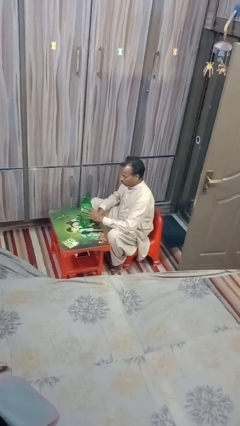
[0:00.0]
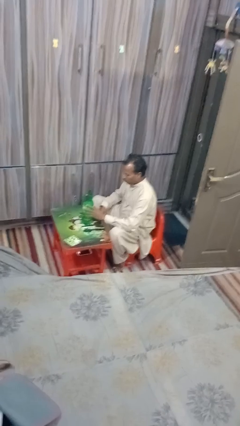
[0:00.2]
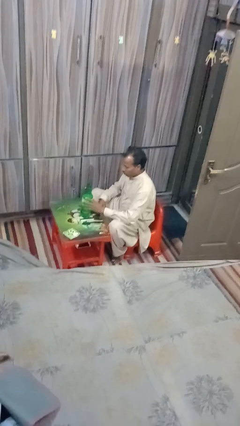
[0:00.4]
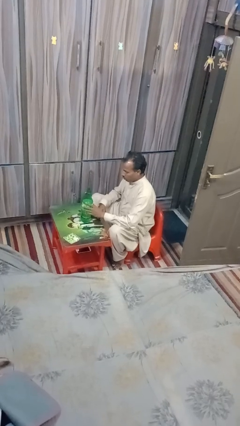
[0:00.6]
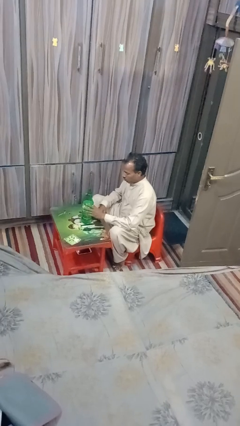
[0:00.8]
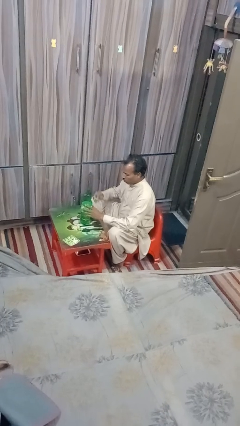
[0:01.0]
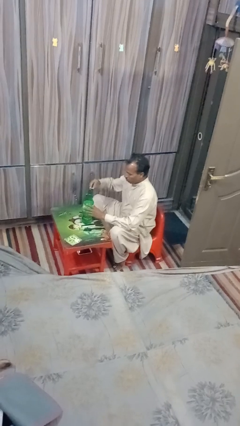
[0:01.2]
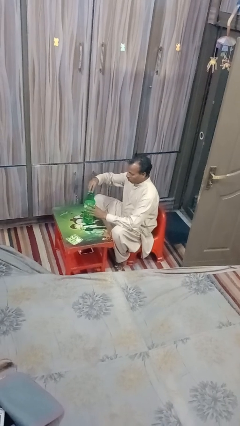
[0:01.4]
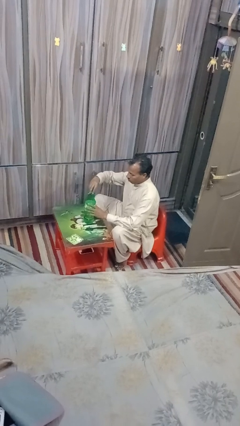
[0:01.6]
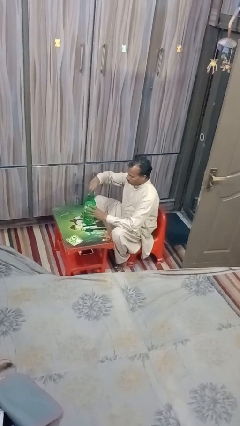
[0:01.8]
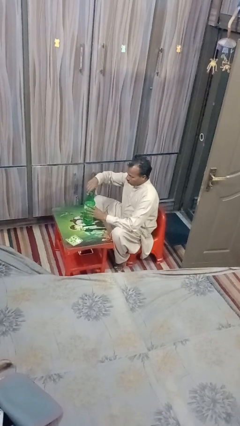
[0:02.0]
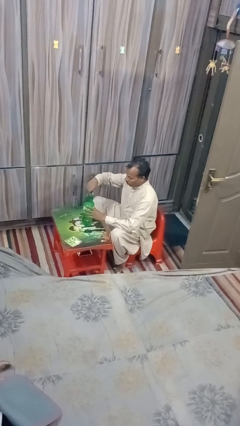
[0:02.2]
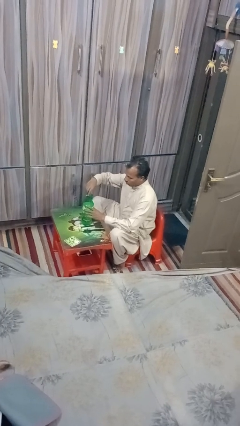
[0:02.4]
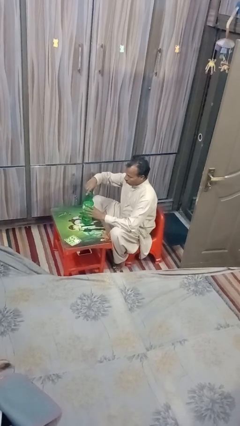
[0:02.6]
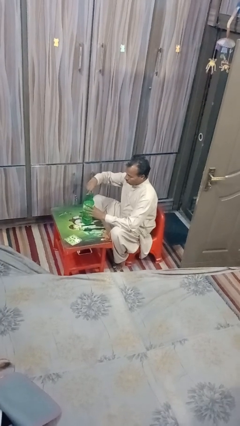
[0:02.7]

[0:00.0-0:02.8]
person screws lid to bottle

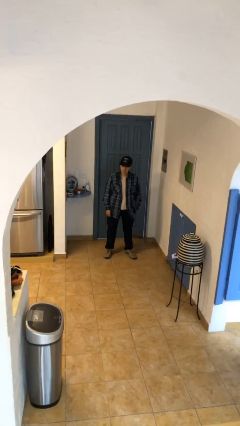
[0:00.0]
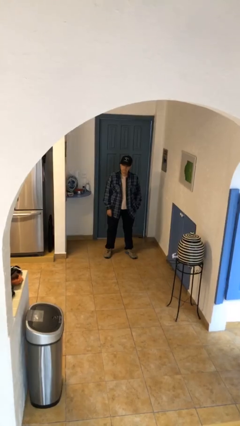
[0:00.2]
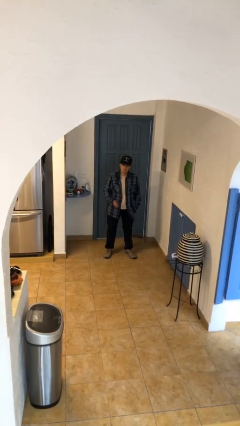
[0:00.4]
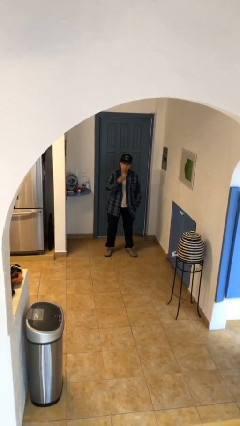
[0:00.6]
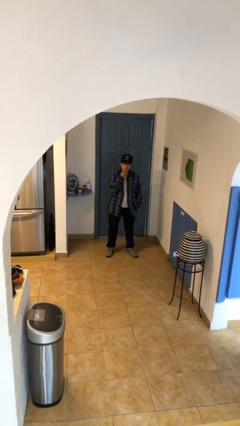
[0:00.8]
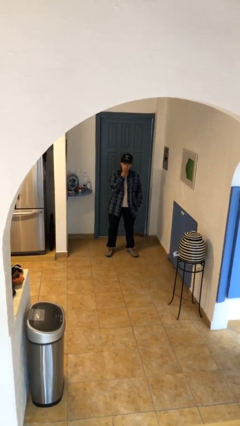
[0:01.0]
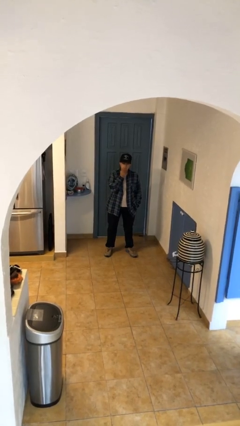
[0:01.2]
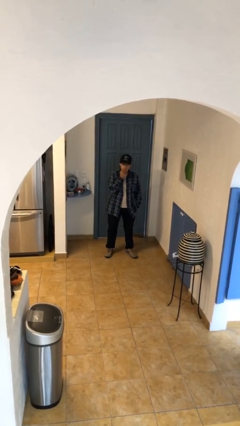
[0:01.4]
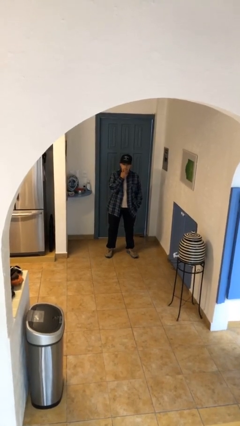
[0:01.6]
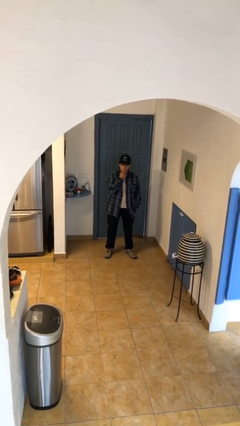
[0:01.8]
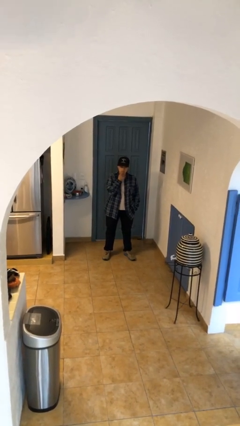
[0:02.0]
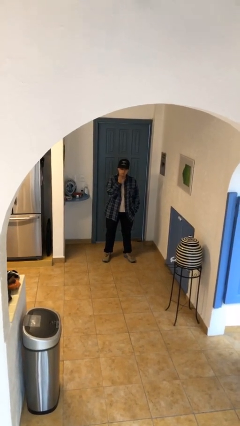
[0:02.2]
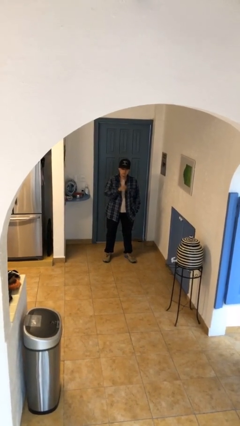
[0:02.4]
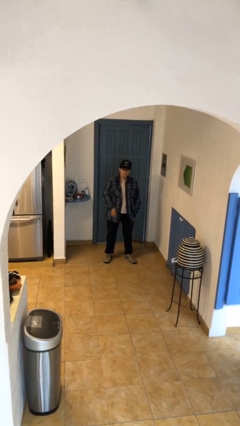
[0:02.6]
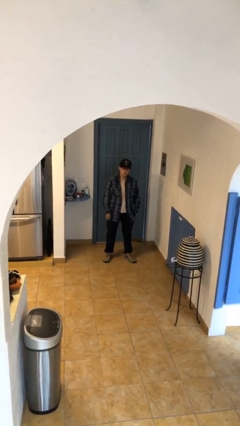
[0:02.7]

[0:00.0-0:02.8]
person strokes chin

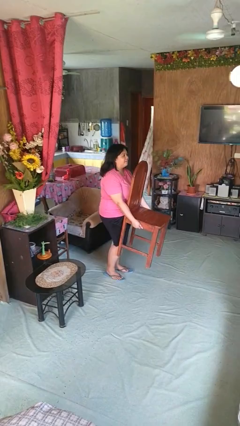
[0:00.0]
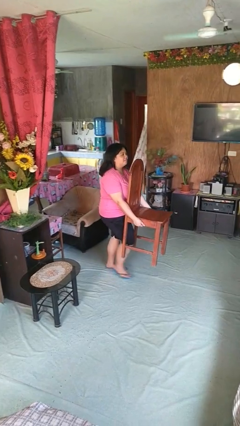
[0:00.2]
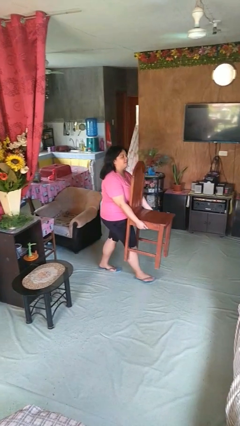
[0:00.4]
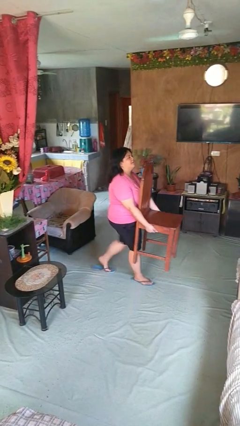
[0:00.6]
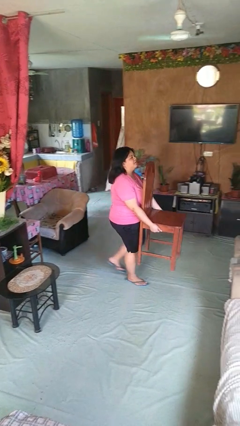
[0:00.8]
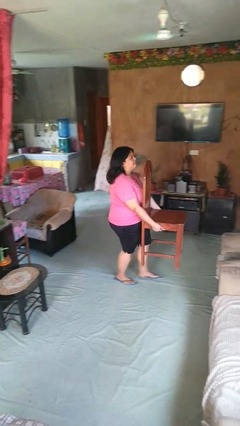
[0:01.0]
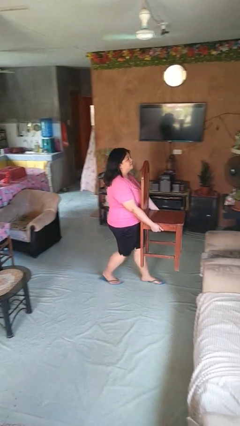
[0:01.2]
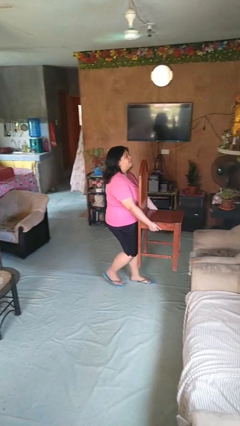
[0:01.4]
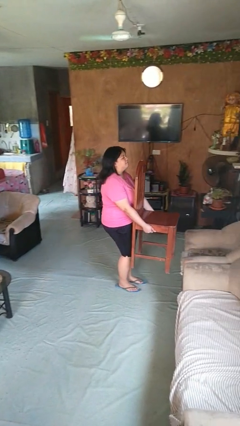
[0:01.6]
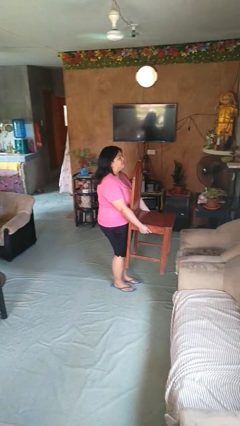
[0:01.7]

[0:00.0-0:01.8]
person carries furniture

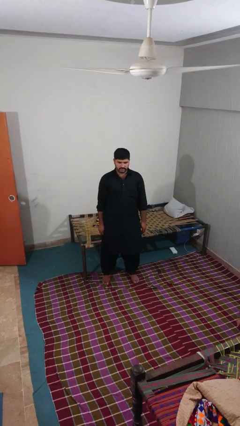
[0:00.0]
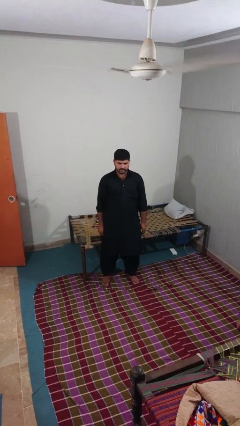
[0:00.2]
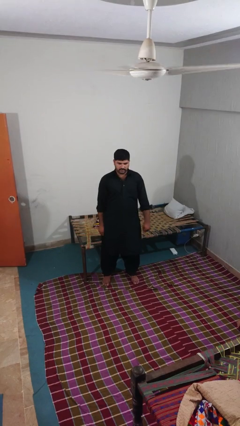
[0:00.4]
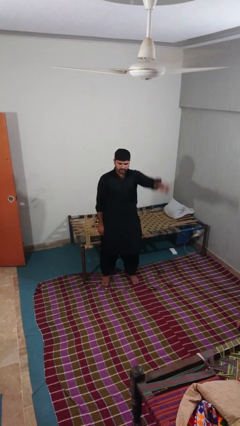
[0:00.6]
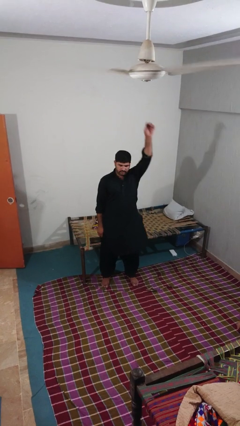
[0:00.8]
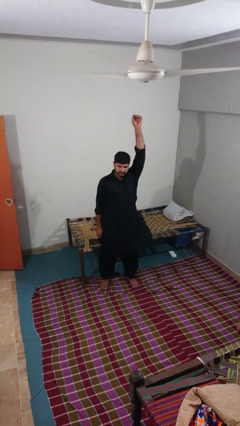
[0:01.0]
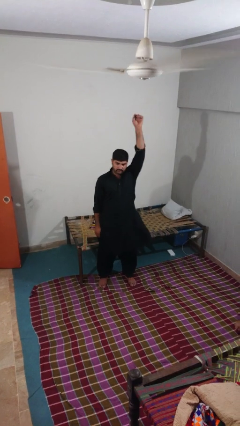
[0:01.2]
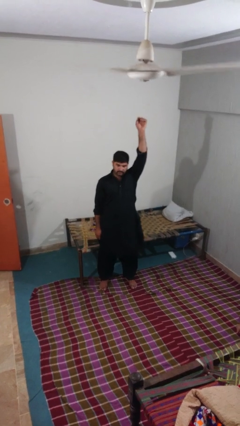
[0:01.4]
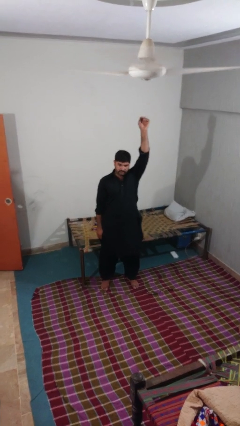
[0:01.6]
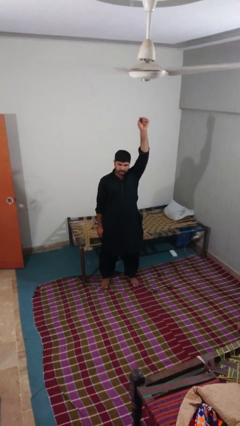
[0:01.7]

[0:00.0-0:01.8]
person gestures raise hand

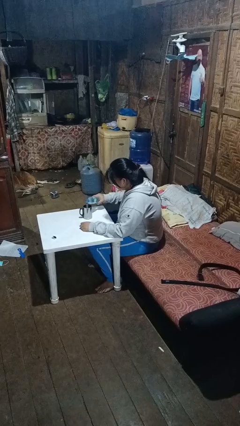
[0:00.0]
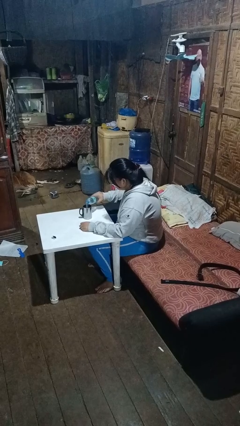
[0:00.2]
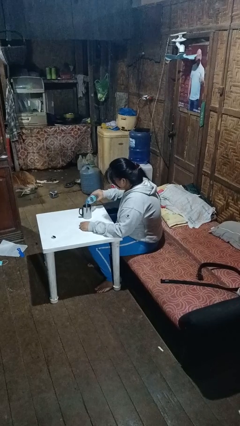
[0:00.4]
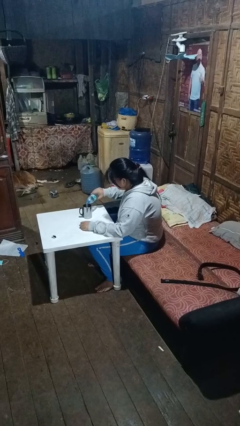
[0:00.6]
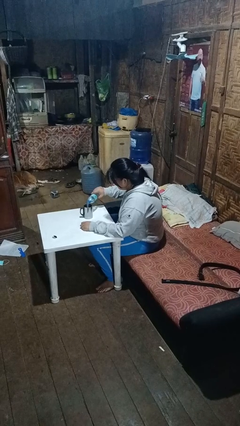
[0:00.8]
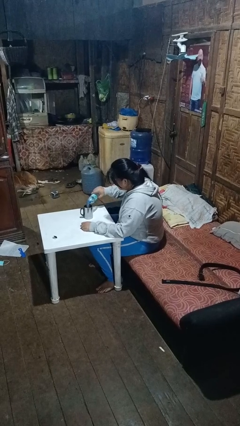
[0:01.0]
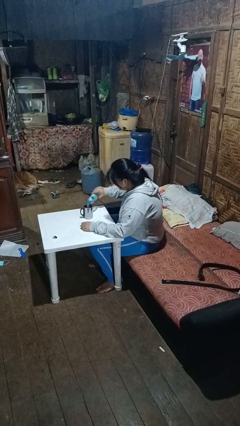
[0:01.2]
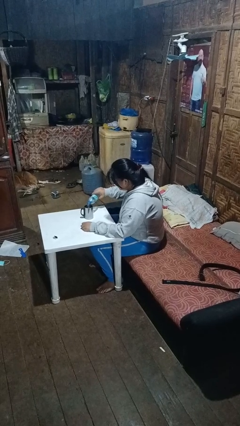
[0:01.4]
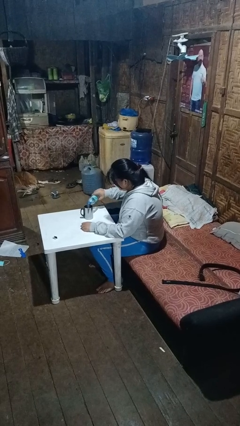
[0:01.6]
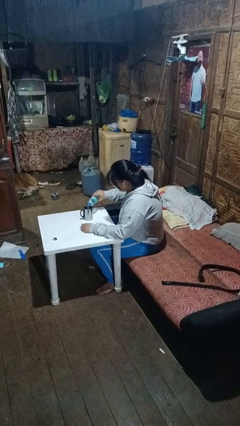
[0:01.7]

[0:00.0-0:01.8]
person pours liquid into cup

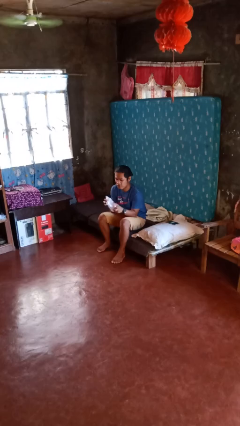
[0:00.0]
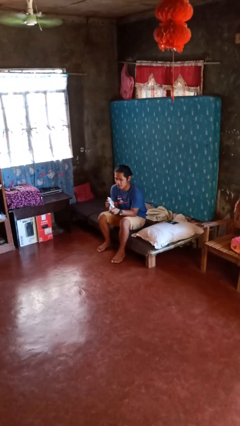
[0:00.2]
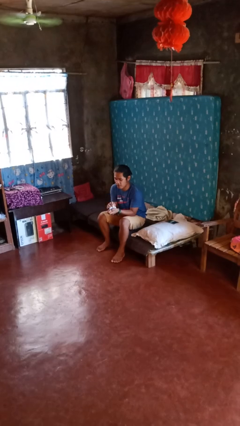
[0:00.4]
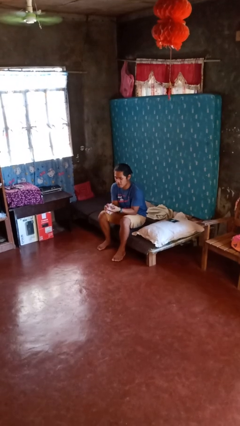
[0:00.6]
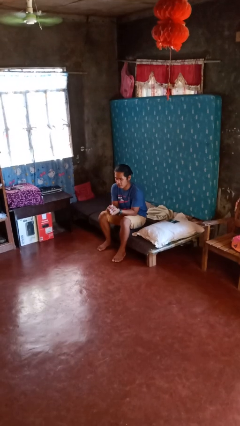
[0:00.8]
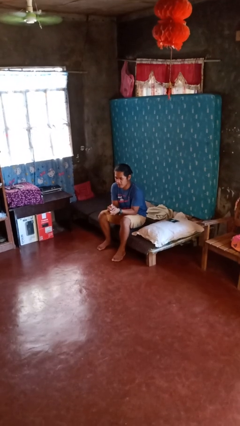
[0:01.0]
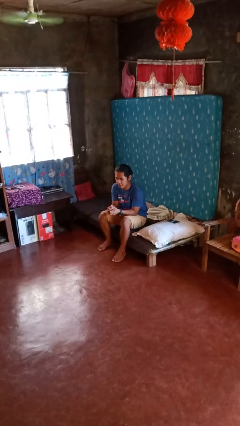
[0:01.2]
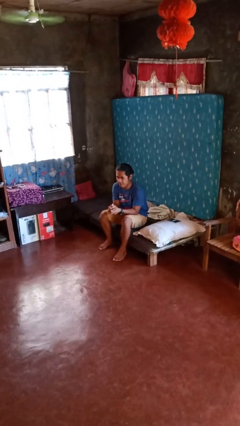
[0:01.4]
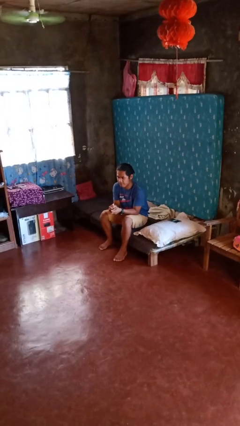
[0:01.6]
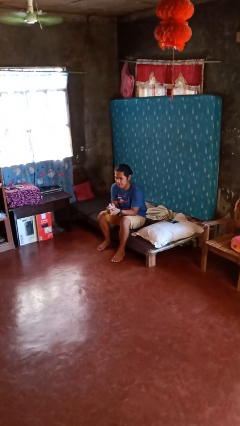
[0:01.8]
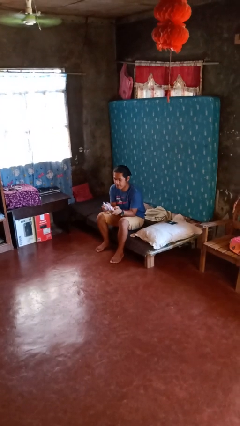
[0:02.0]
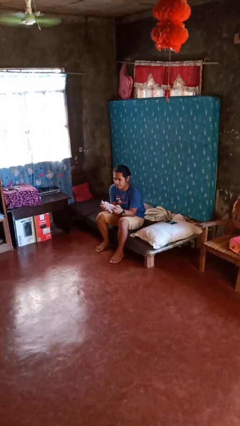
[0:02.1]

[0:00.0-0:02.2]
person crumples paper

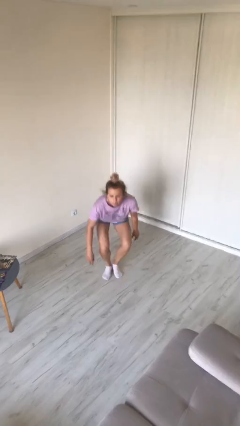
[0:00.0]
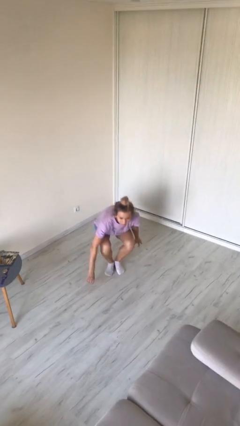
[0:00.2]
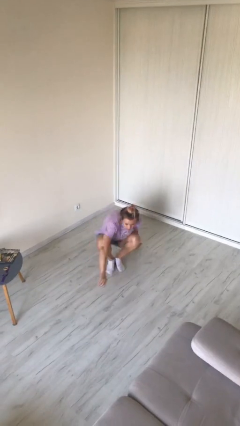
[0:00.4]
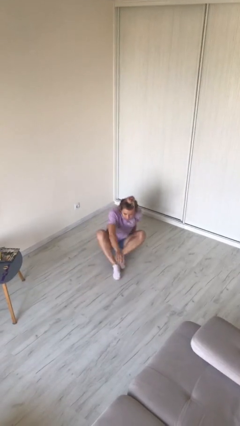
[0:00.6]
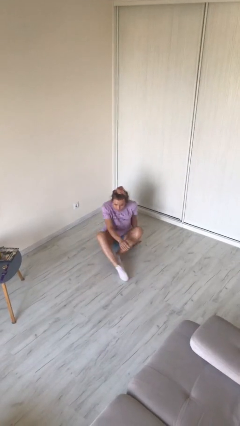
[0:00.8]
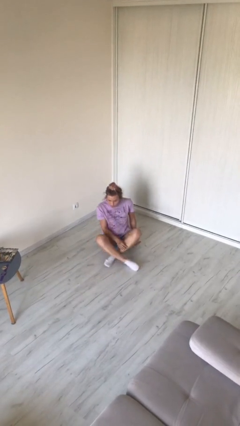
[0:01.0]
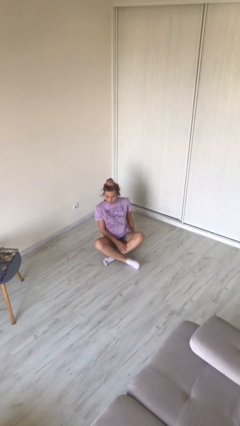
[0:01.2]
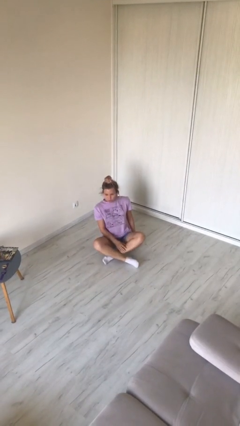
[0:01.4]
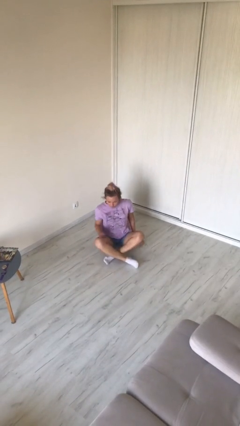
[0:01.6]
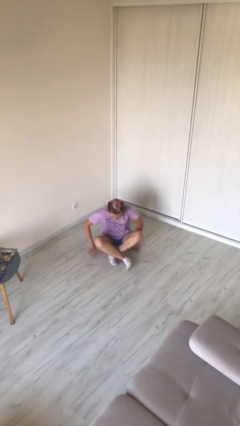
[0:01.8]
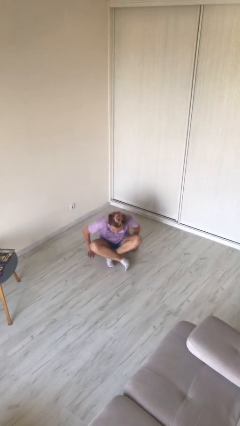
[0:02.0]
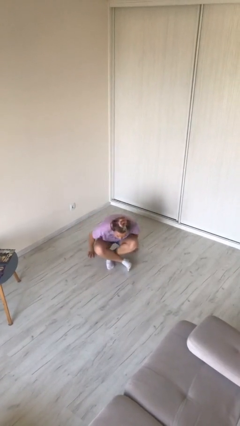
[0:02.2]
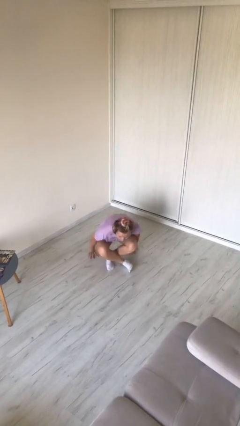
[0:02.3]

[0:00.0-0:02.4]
person sits crisscross

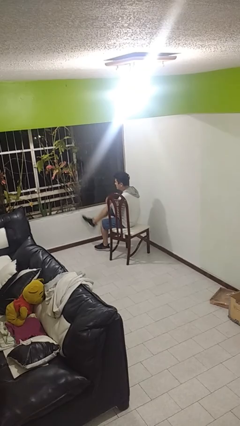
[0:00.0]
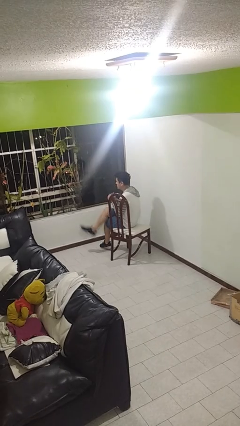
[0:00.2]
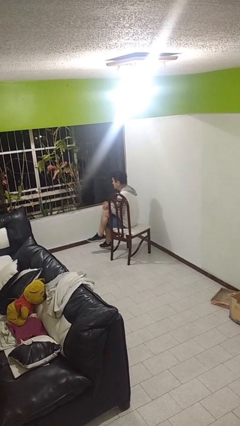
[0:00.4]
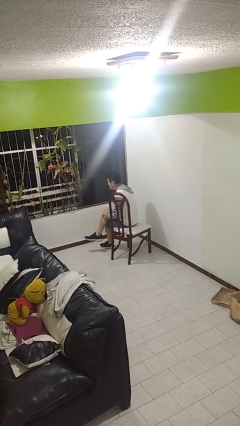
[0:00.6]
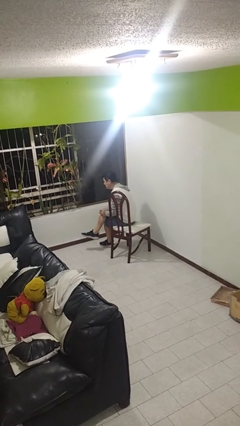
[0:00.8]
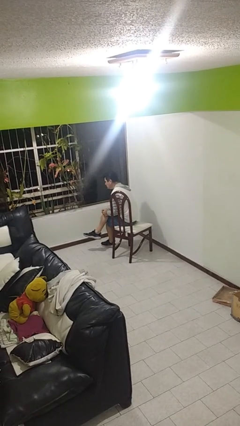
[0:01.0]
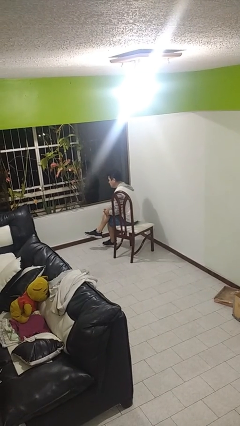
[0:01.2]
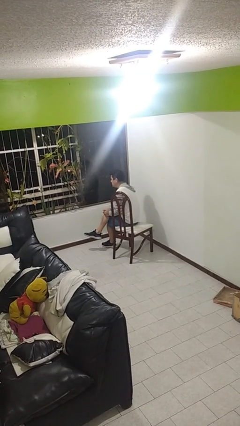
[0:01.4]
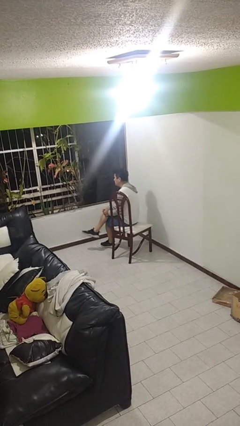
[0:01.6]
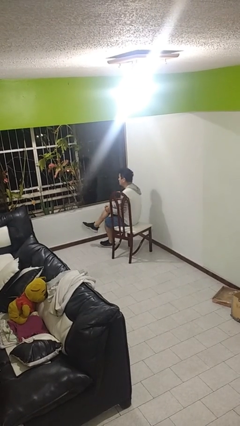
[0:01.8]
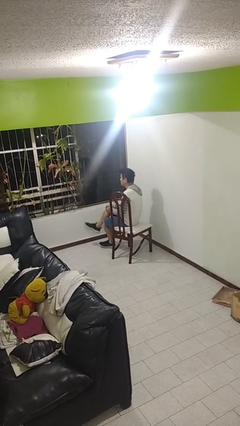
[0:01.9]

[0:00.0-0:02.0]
person crosses legs
